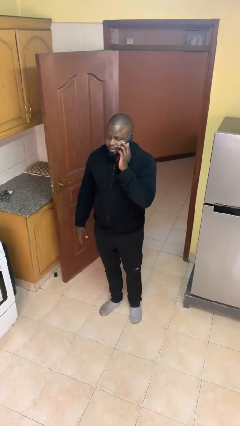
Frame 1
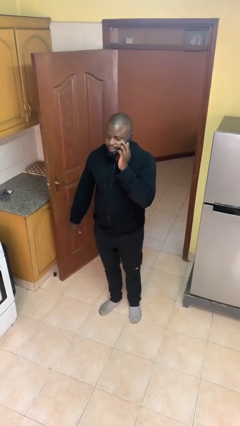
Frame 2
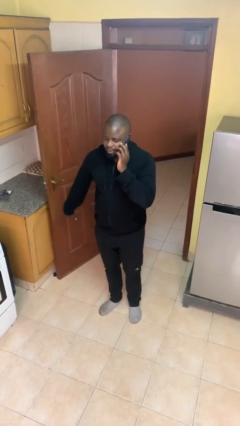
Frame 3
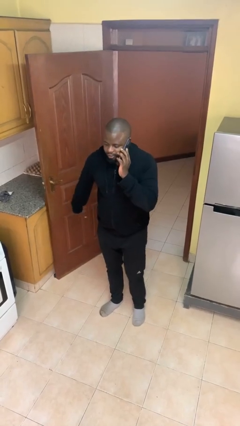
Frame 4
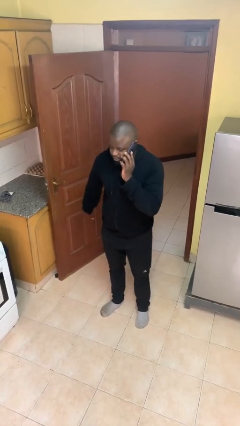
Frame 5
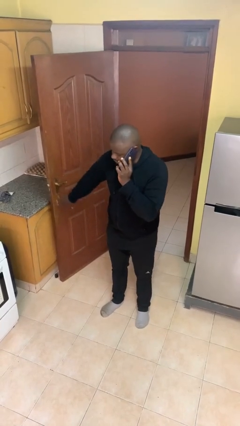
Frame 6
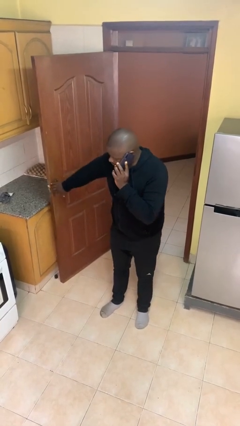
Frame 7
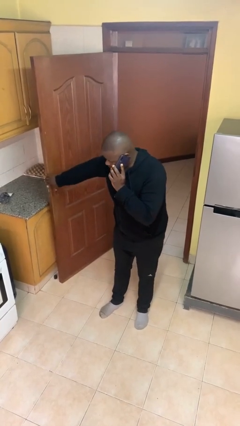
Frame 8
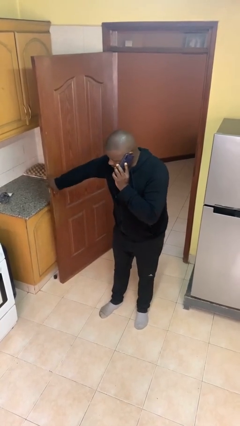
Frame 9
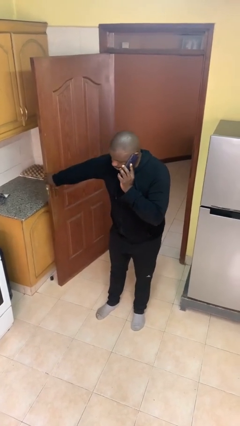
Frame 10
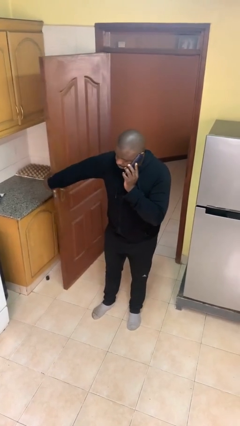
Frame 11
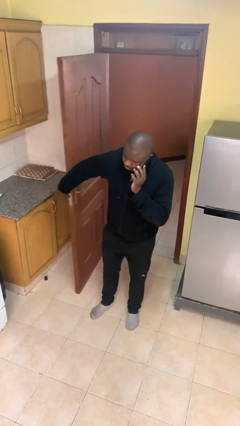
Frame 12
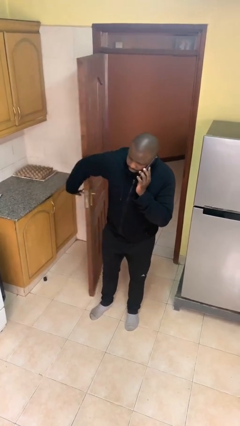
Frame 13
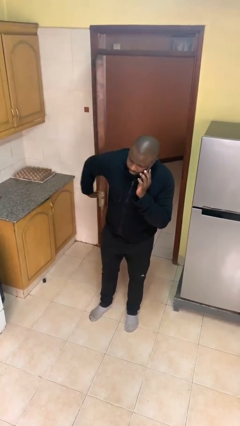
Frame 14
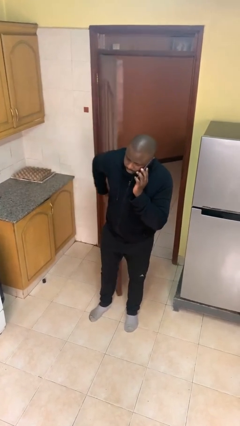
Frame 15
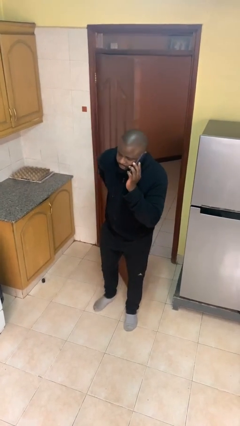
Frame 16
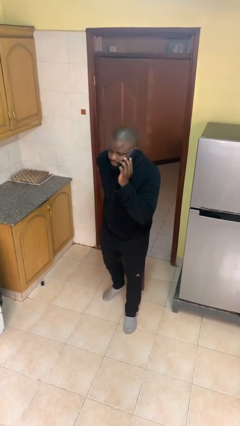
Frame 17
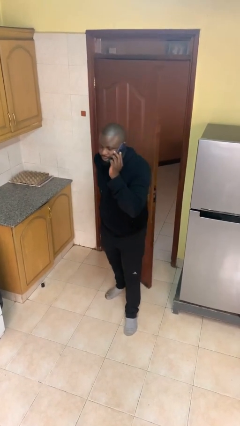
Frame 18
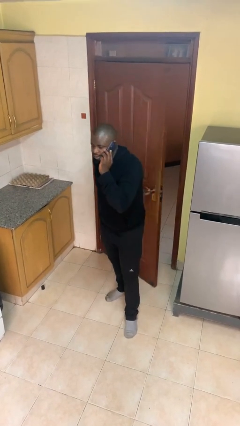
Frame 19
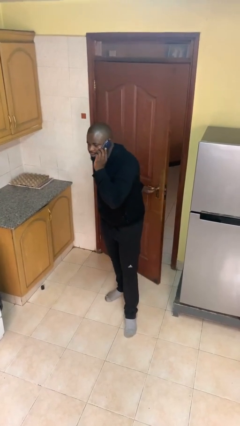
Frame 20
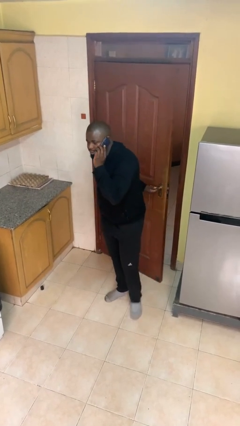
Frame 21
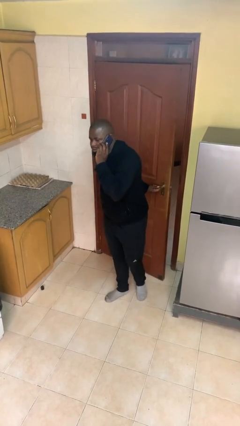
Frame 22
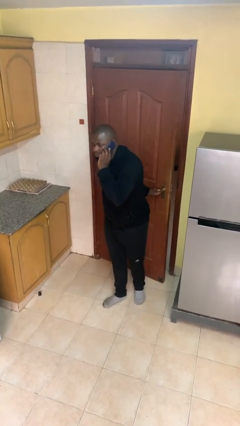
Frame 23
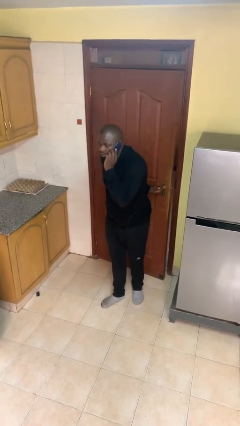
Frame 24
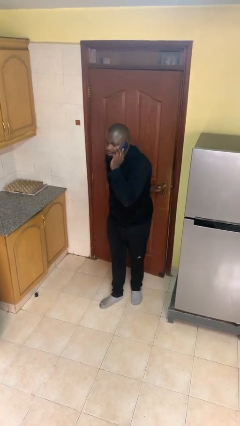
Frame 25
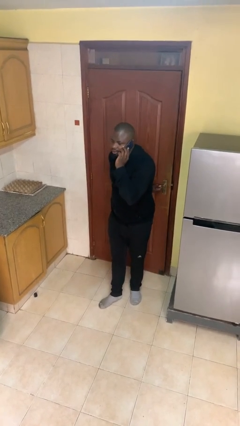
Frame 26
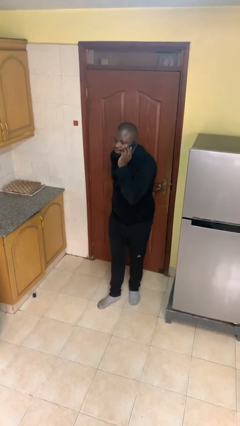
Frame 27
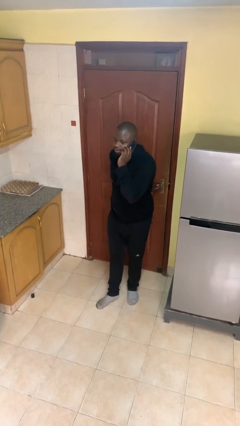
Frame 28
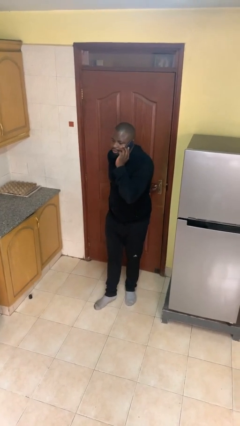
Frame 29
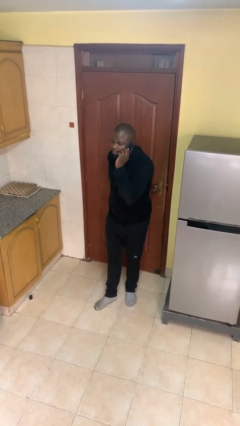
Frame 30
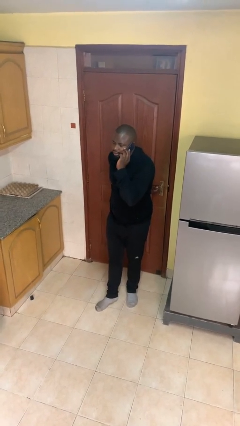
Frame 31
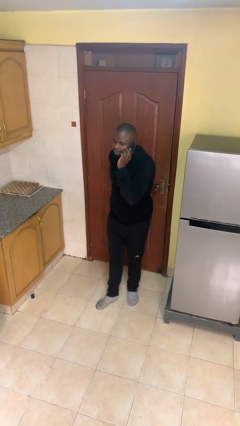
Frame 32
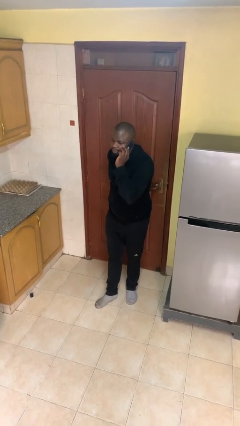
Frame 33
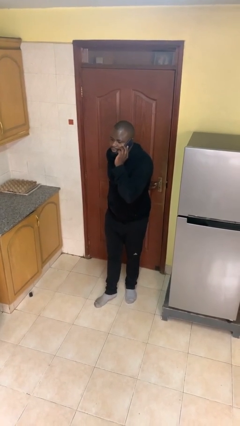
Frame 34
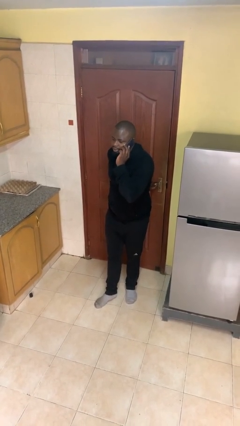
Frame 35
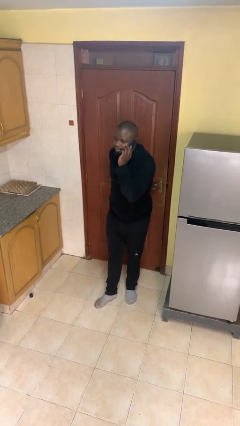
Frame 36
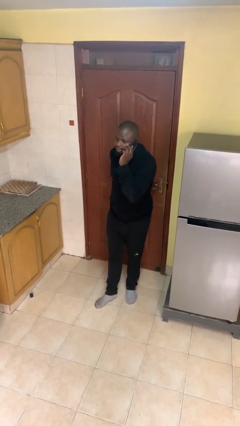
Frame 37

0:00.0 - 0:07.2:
person closes facility door

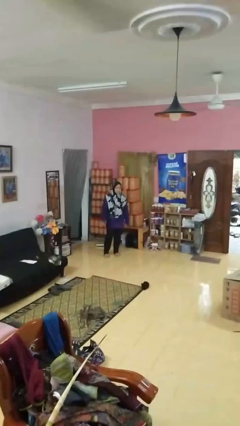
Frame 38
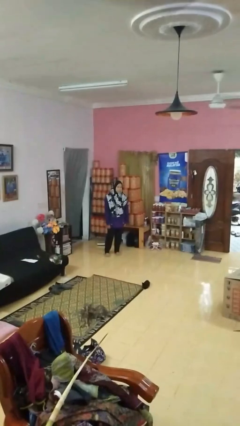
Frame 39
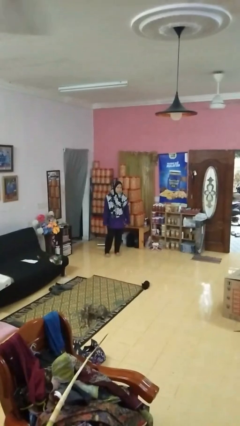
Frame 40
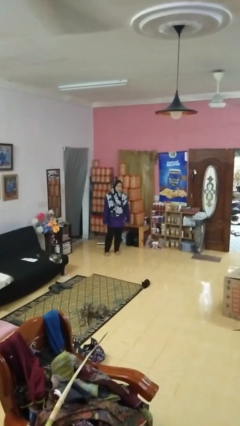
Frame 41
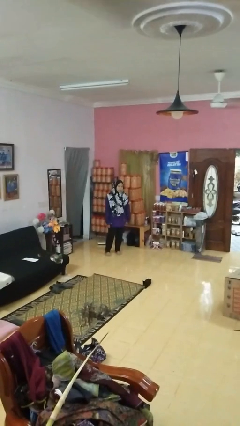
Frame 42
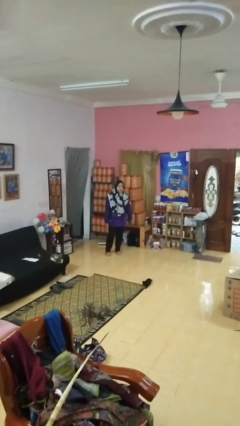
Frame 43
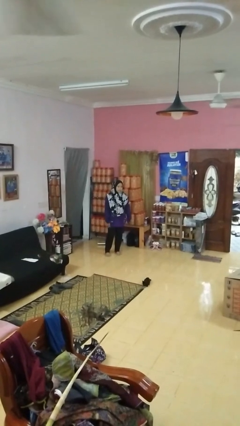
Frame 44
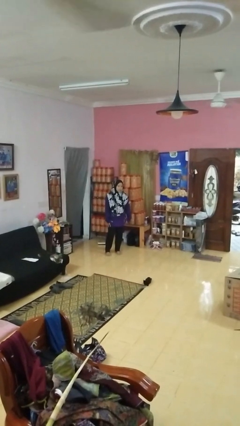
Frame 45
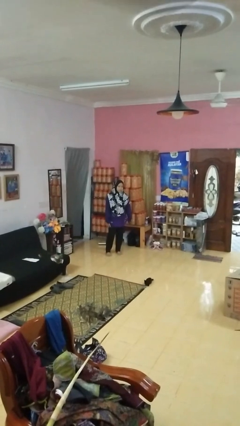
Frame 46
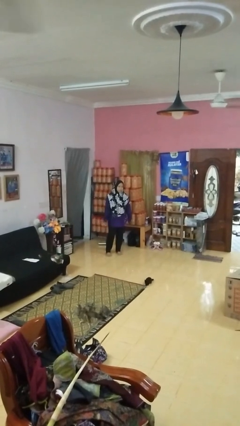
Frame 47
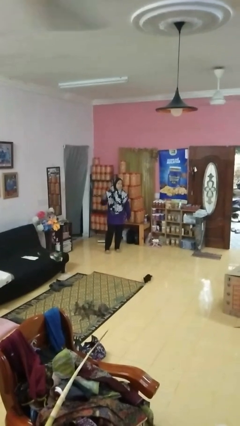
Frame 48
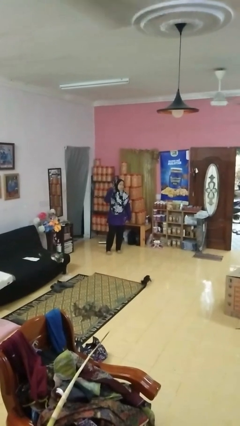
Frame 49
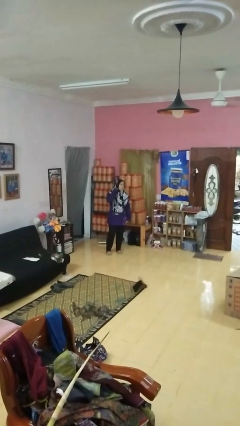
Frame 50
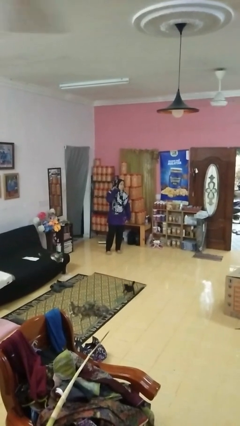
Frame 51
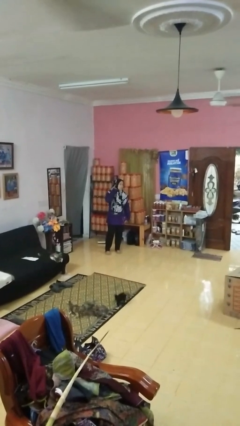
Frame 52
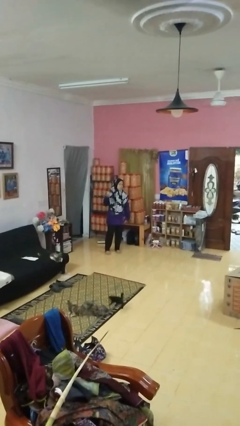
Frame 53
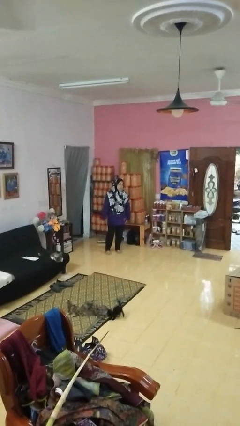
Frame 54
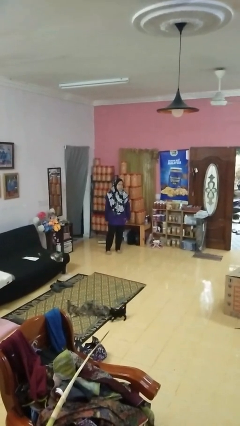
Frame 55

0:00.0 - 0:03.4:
person gestures listen closely

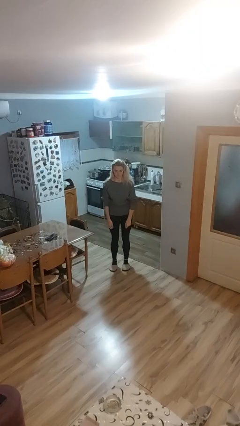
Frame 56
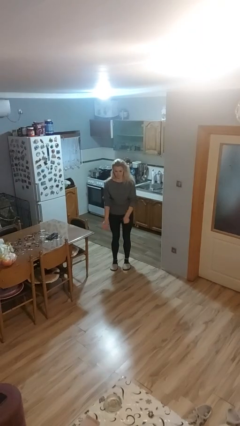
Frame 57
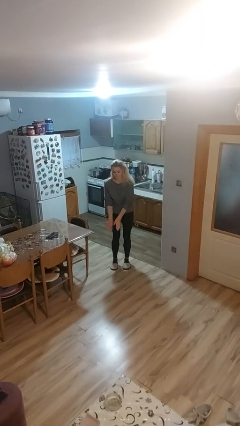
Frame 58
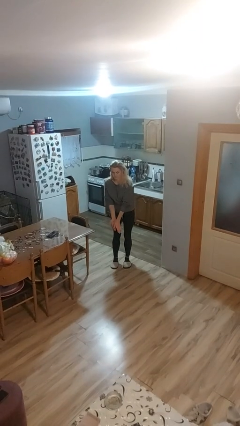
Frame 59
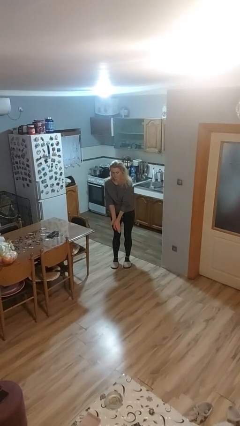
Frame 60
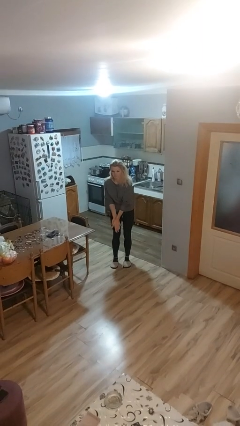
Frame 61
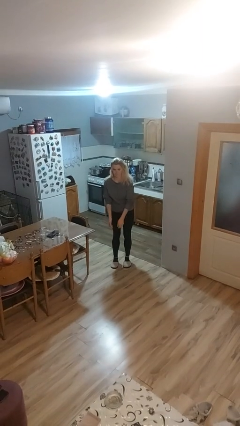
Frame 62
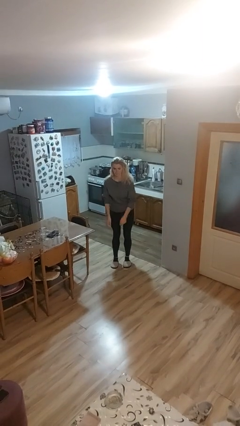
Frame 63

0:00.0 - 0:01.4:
person claps hands

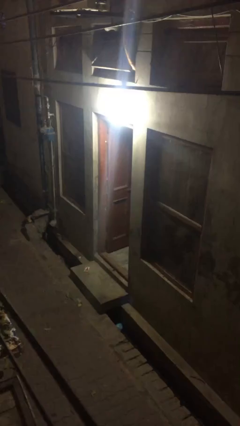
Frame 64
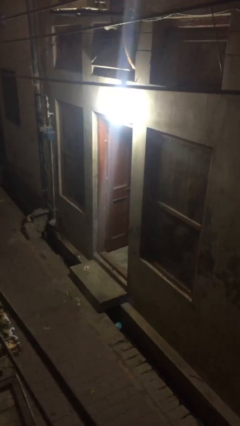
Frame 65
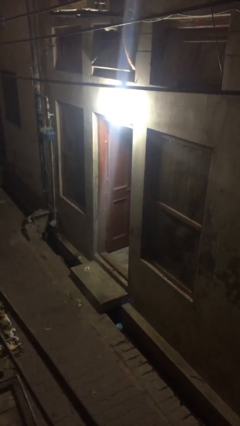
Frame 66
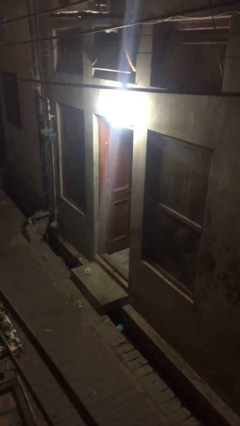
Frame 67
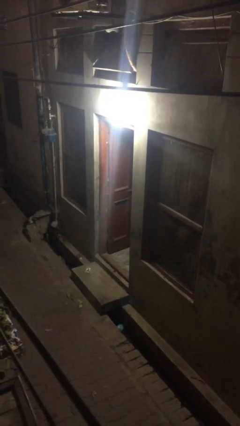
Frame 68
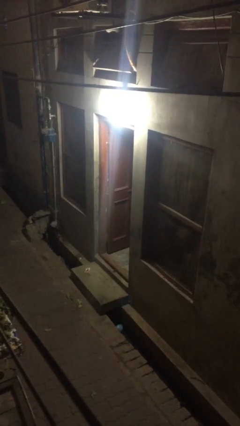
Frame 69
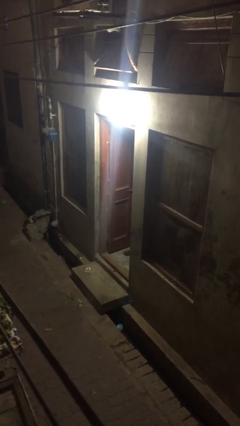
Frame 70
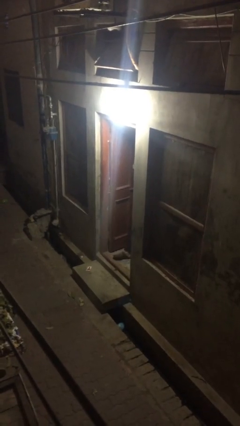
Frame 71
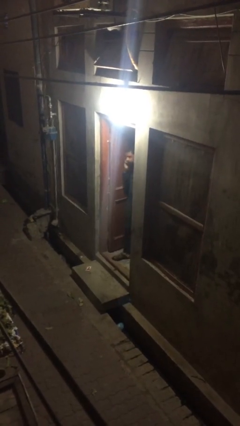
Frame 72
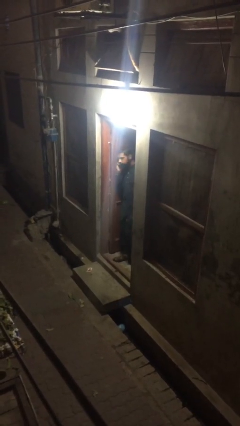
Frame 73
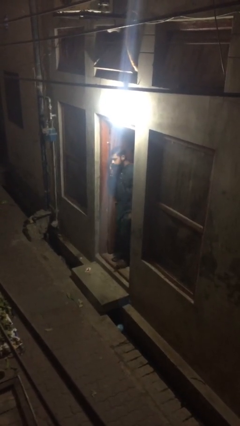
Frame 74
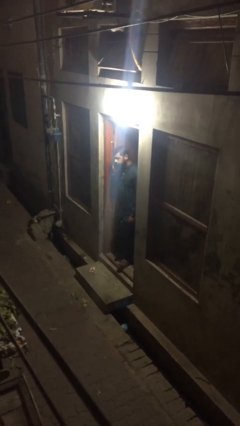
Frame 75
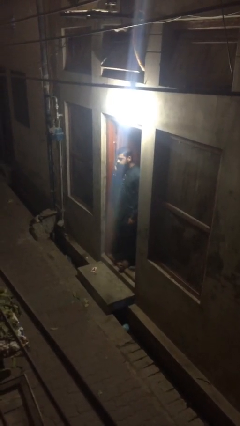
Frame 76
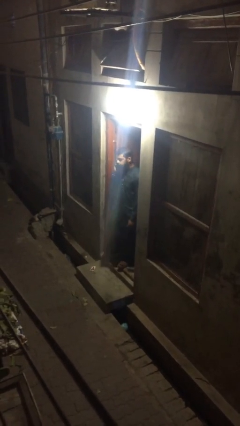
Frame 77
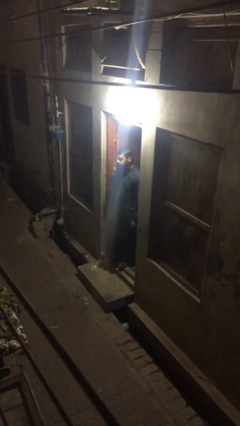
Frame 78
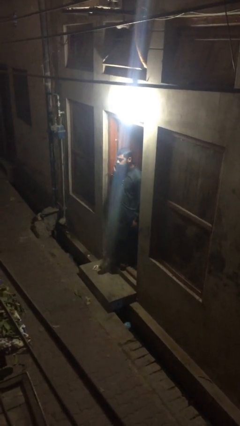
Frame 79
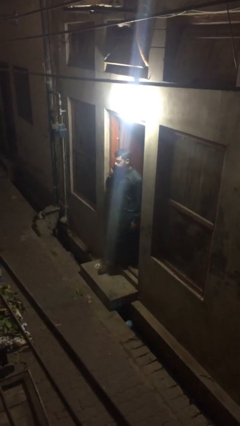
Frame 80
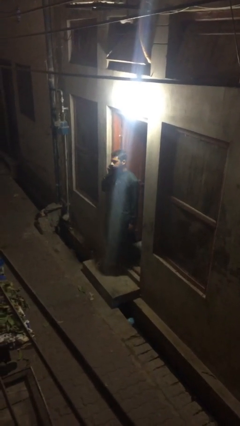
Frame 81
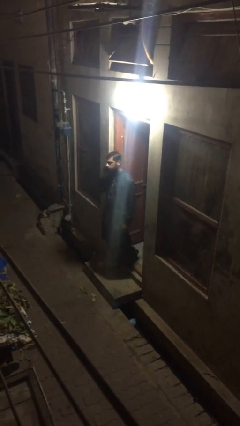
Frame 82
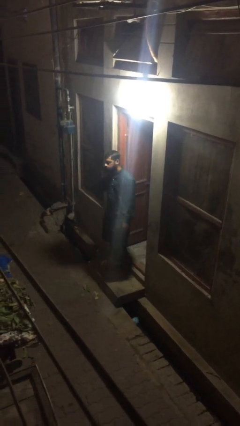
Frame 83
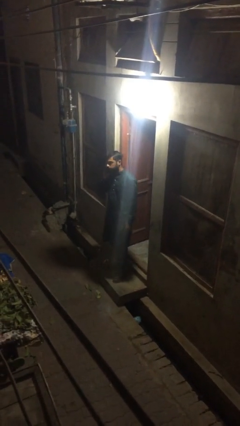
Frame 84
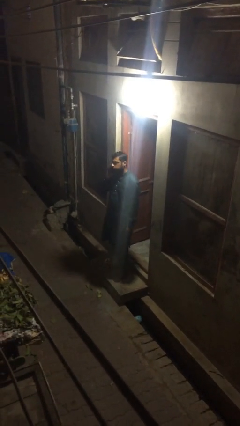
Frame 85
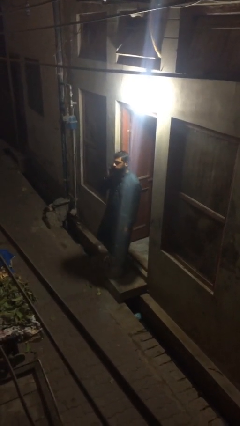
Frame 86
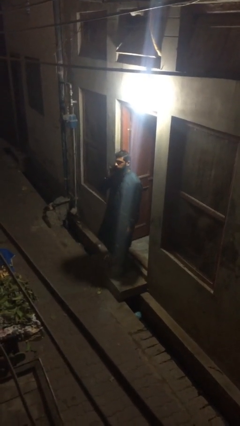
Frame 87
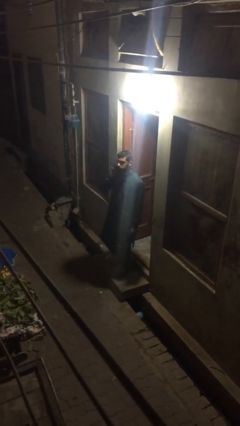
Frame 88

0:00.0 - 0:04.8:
person enters scene through structure

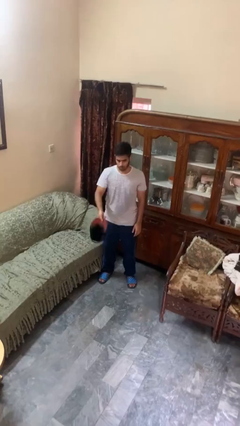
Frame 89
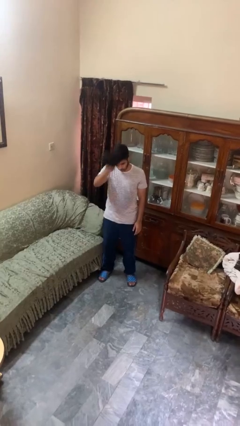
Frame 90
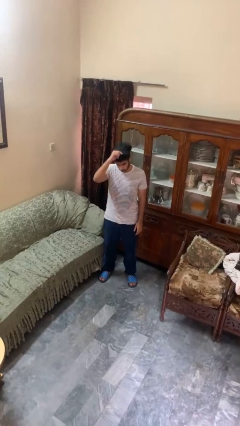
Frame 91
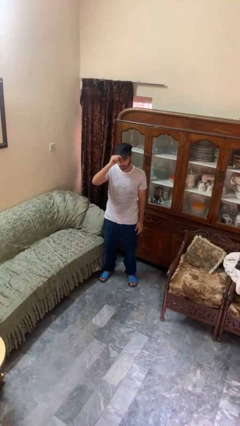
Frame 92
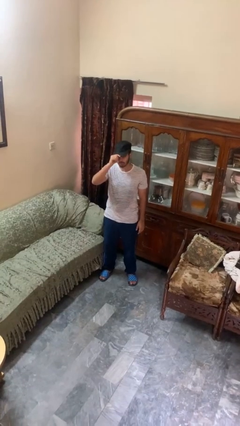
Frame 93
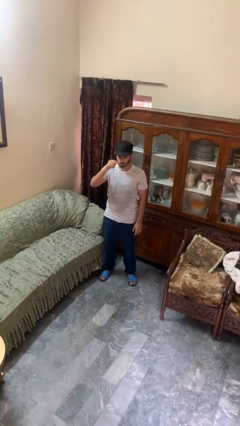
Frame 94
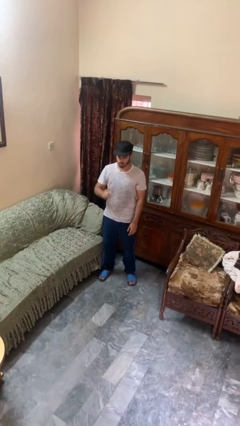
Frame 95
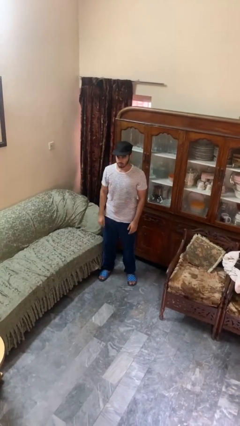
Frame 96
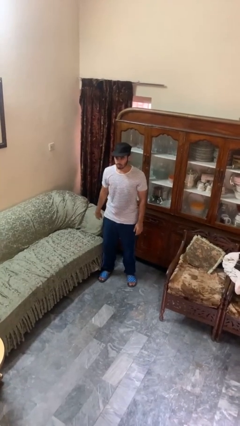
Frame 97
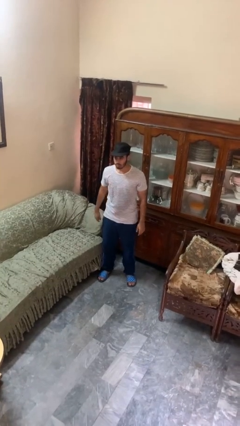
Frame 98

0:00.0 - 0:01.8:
person puts on hat
